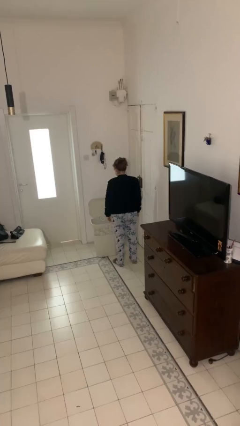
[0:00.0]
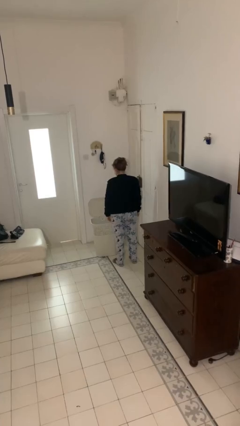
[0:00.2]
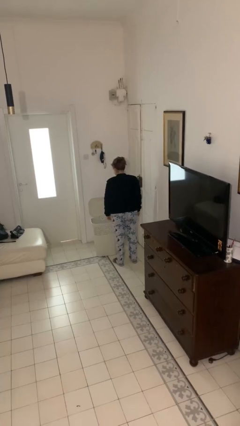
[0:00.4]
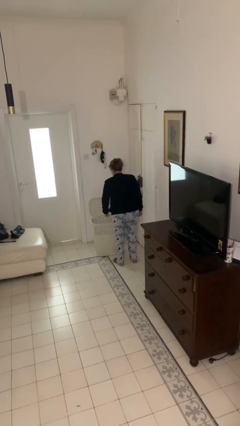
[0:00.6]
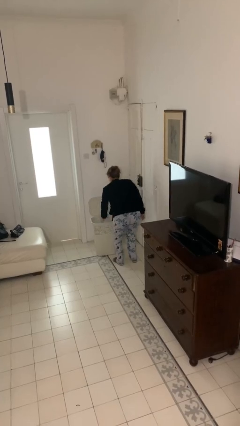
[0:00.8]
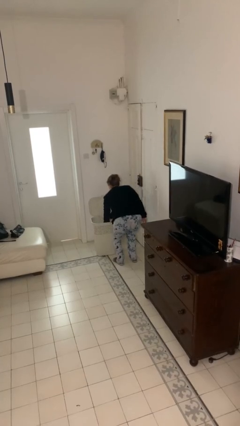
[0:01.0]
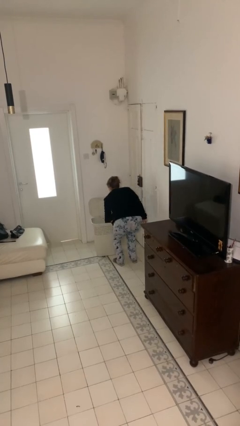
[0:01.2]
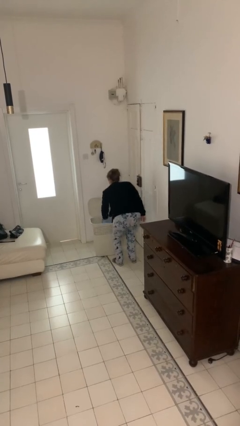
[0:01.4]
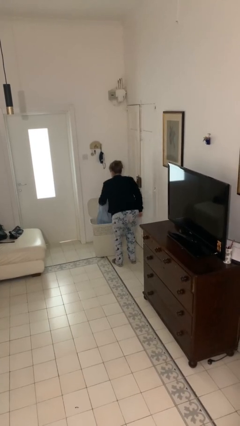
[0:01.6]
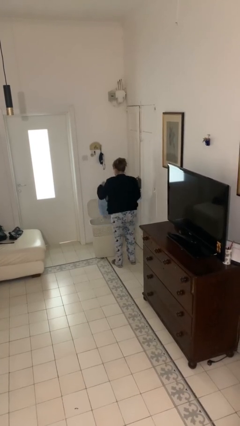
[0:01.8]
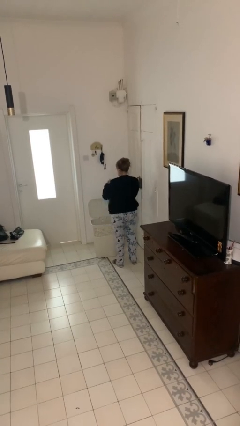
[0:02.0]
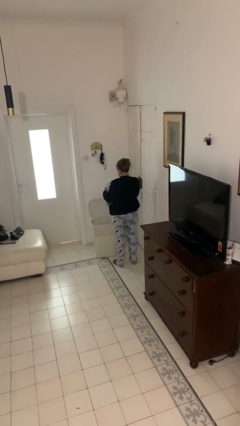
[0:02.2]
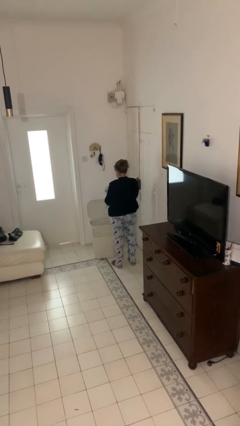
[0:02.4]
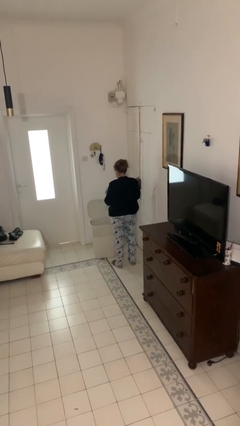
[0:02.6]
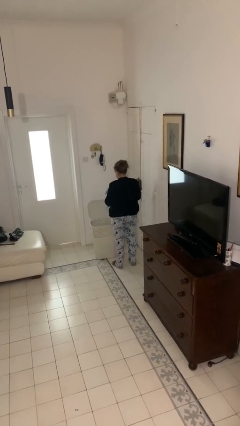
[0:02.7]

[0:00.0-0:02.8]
person takes object from basket

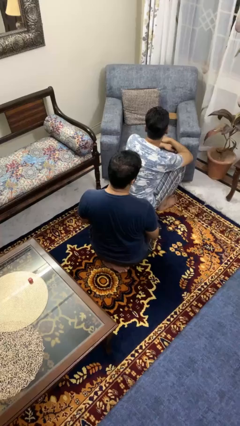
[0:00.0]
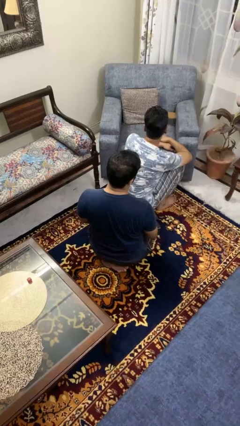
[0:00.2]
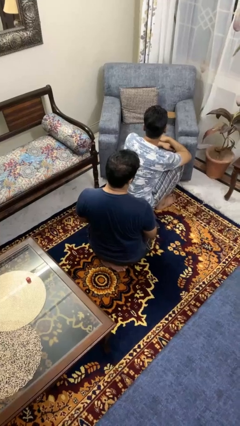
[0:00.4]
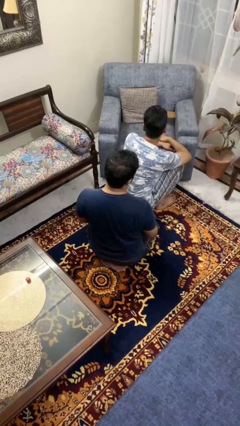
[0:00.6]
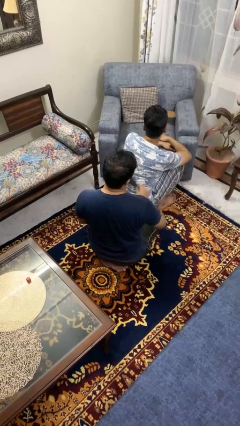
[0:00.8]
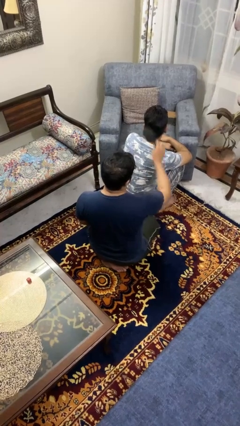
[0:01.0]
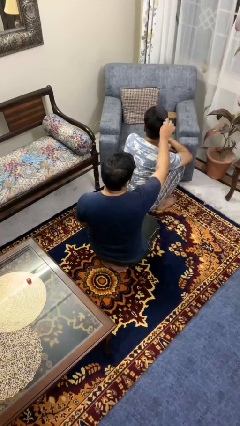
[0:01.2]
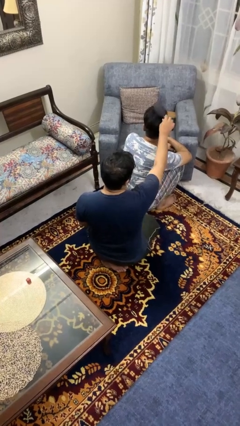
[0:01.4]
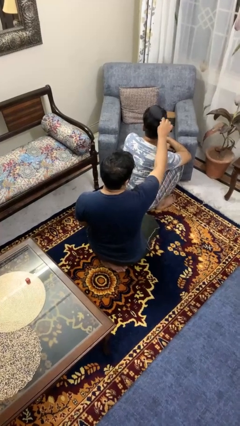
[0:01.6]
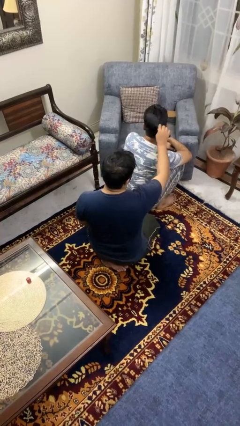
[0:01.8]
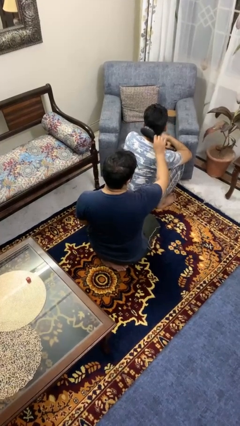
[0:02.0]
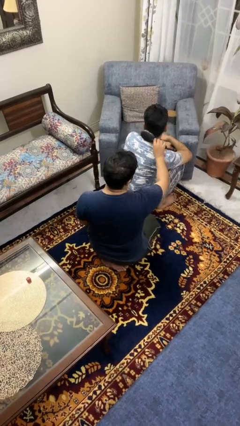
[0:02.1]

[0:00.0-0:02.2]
person brushes hair of person

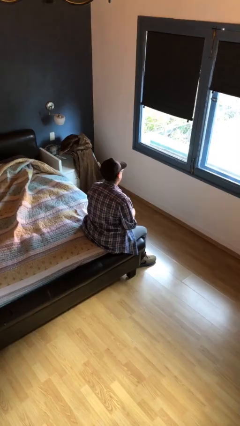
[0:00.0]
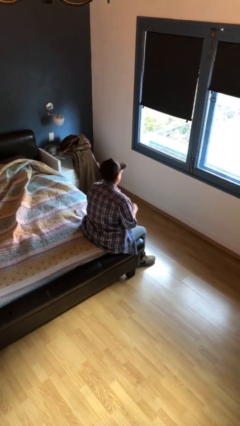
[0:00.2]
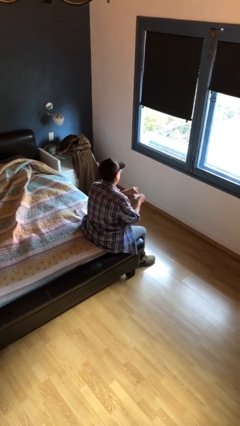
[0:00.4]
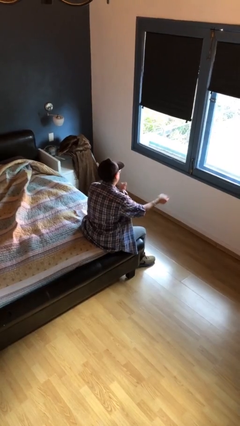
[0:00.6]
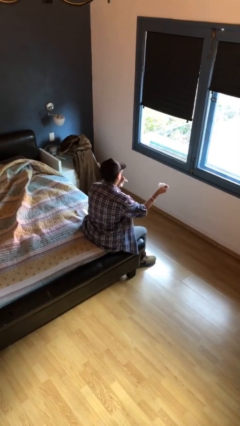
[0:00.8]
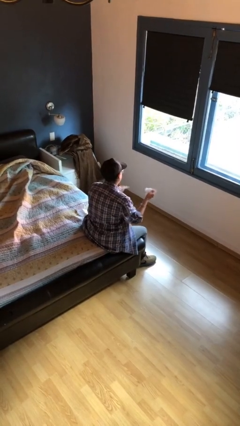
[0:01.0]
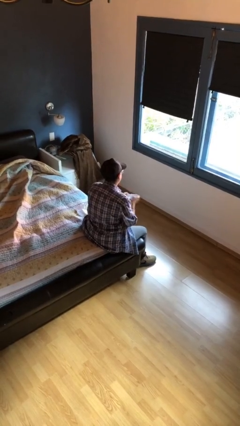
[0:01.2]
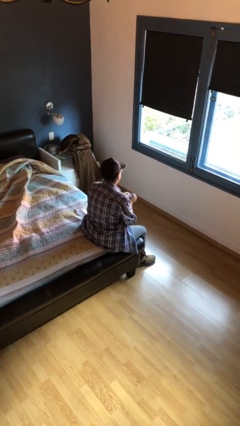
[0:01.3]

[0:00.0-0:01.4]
person tears paper

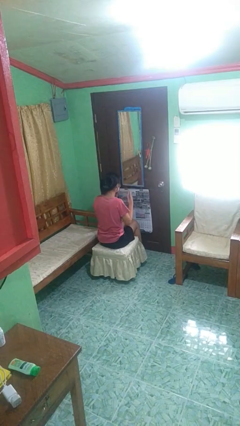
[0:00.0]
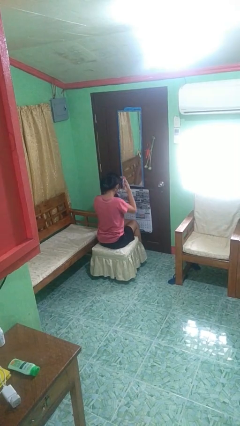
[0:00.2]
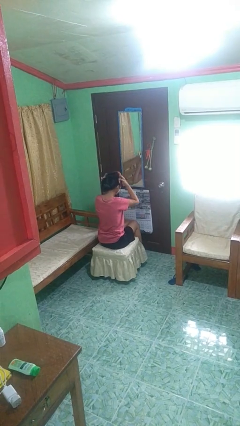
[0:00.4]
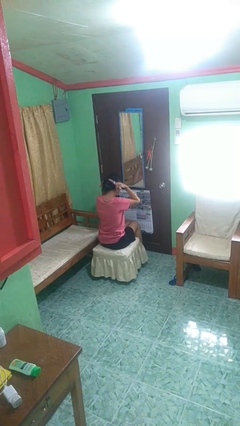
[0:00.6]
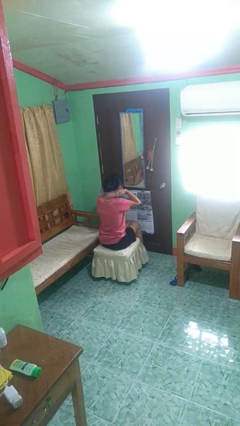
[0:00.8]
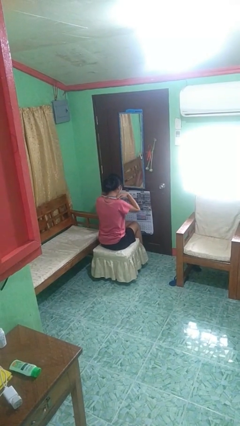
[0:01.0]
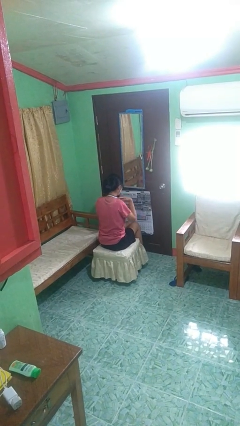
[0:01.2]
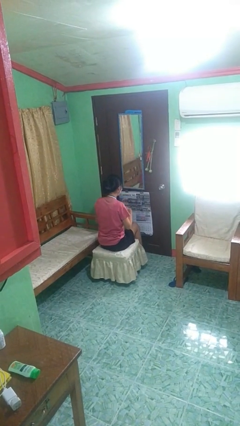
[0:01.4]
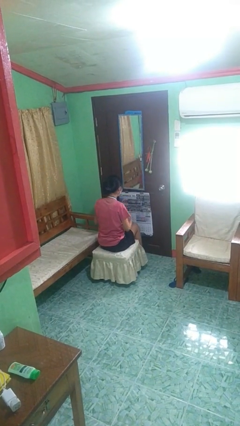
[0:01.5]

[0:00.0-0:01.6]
person puts on necklace

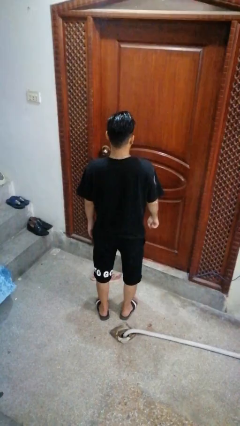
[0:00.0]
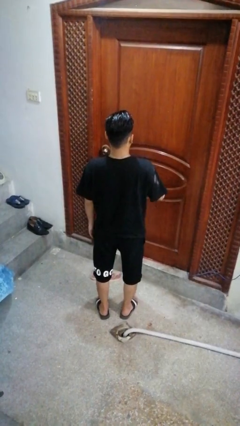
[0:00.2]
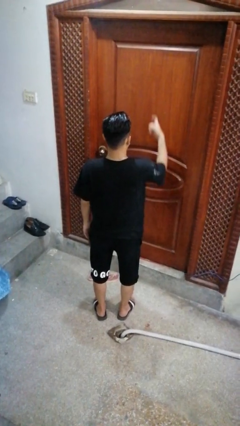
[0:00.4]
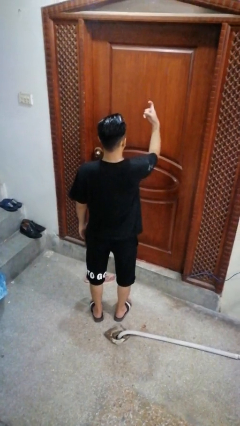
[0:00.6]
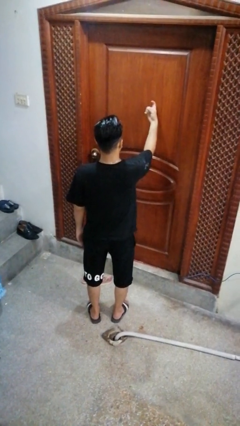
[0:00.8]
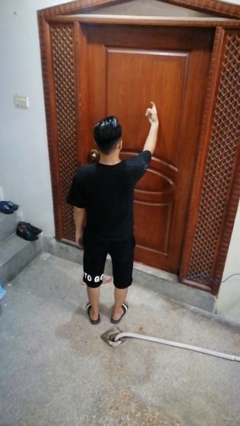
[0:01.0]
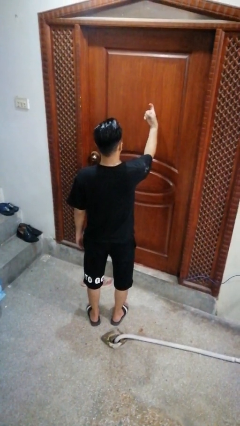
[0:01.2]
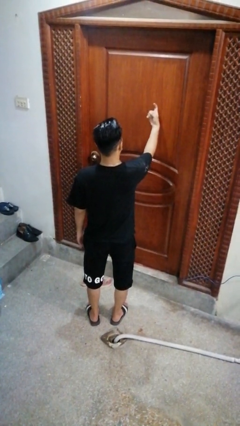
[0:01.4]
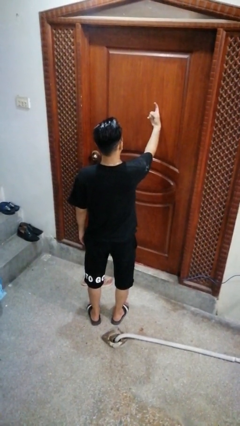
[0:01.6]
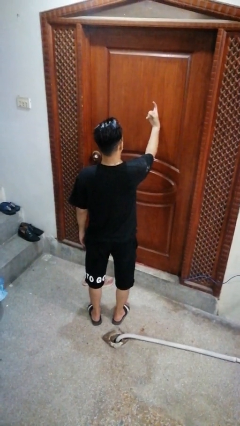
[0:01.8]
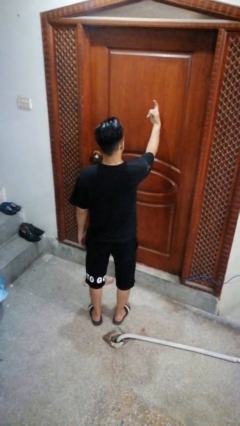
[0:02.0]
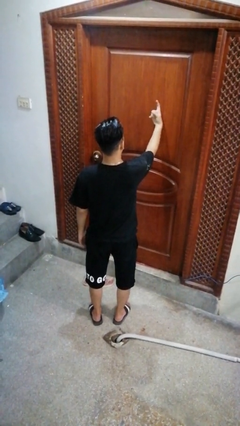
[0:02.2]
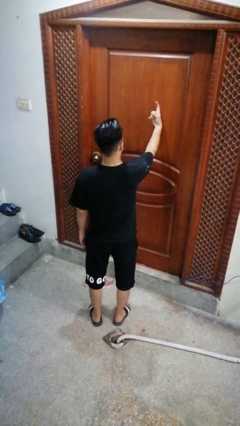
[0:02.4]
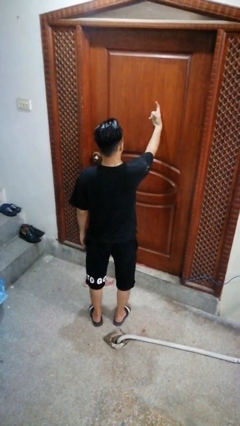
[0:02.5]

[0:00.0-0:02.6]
person taps object with finger

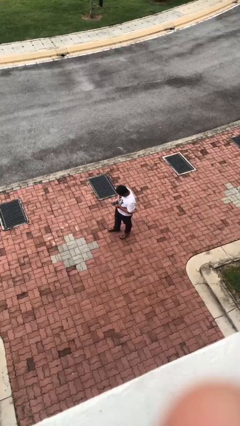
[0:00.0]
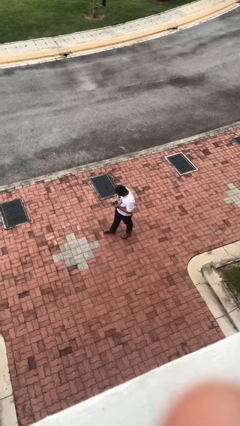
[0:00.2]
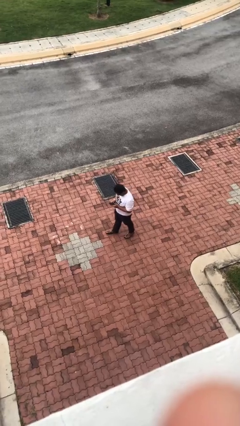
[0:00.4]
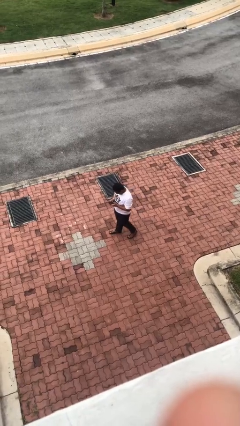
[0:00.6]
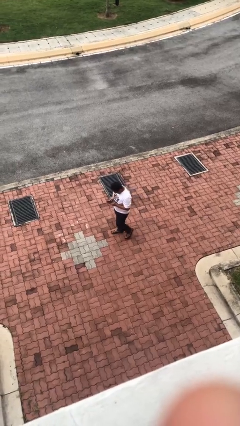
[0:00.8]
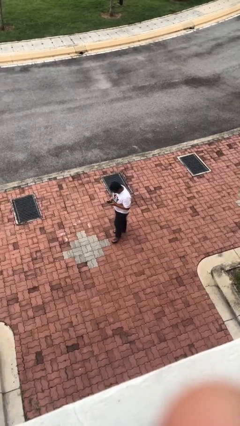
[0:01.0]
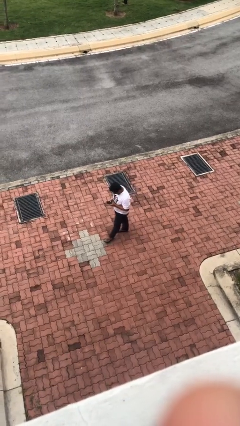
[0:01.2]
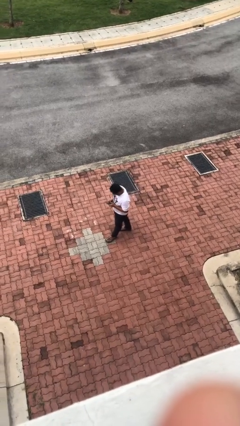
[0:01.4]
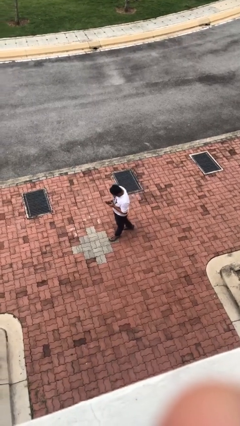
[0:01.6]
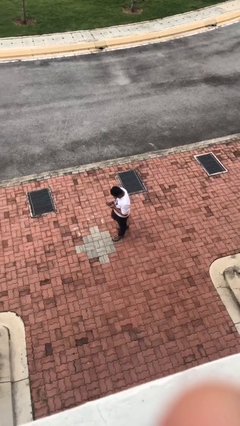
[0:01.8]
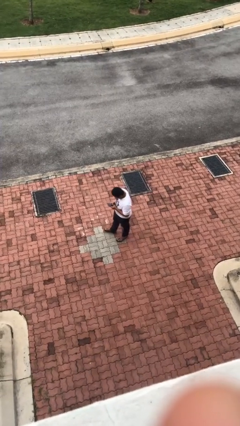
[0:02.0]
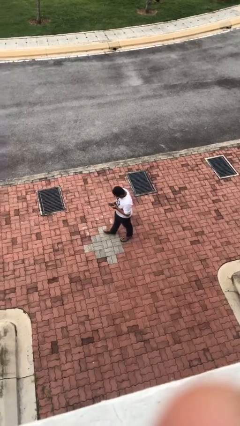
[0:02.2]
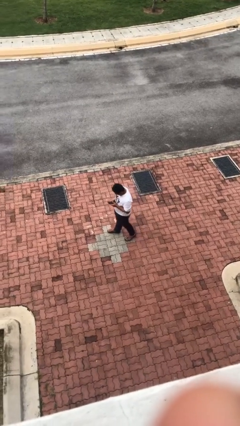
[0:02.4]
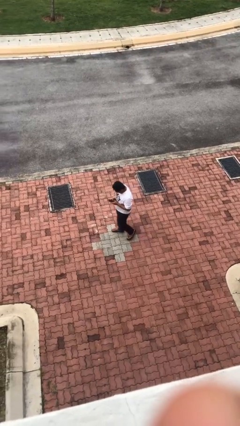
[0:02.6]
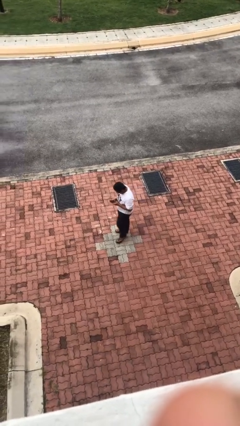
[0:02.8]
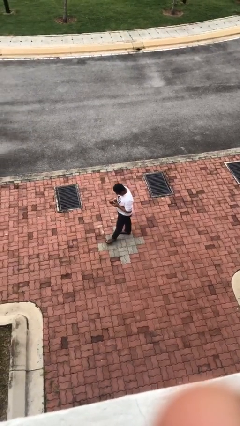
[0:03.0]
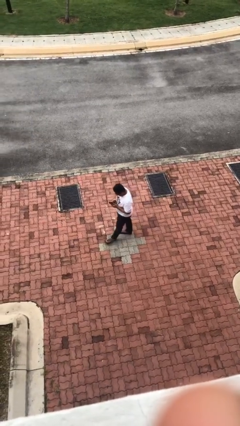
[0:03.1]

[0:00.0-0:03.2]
person texts on phone

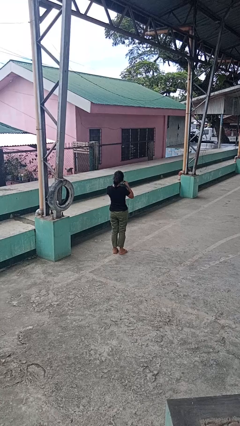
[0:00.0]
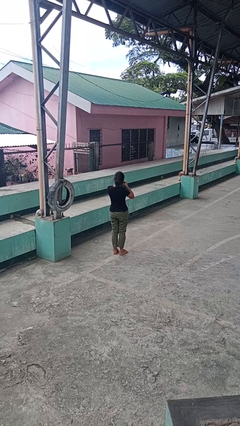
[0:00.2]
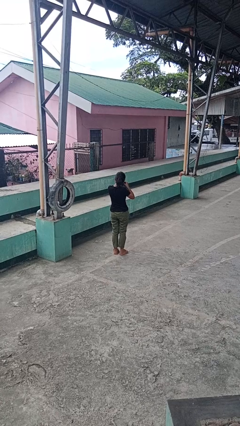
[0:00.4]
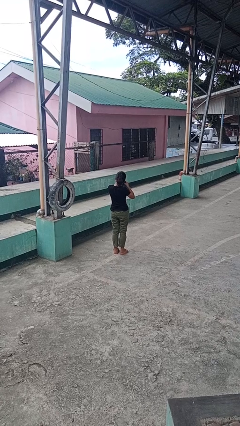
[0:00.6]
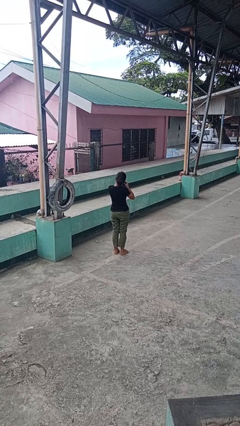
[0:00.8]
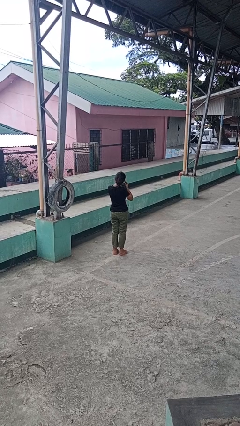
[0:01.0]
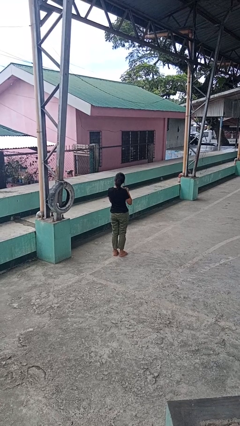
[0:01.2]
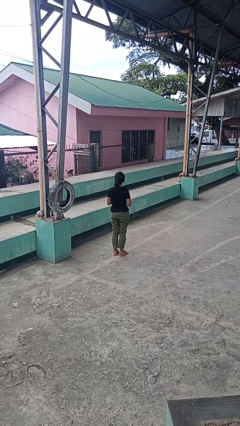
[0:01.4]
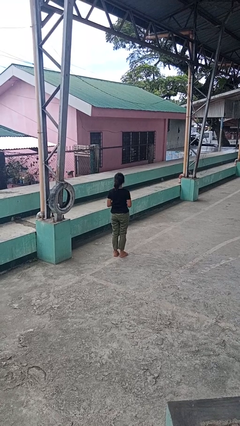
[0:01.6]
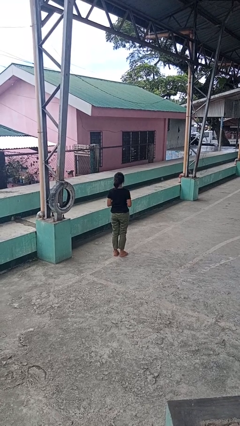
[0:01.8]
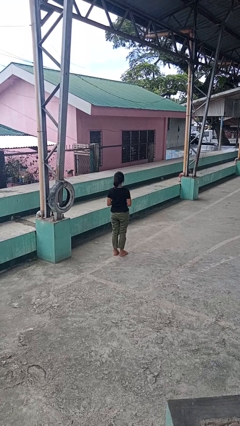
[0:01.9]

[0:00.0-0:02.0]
person takes off earrings

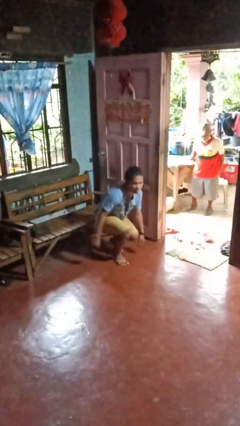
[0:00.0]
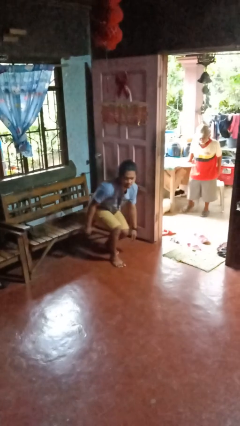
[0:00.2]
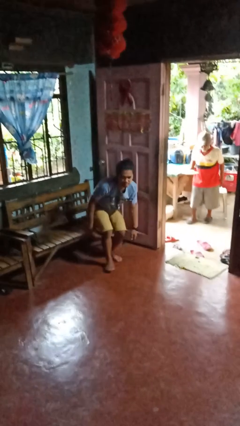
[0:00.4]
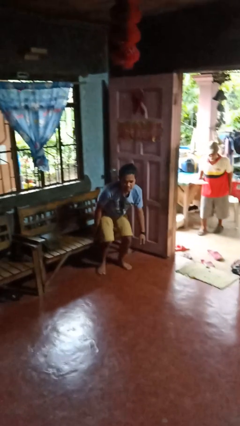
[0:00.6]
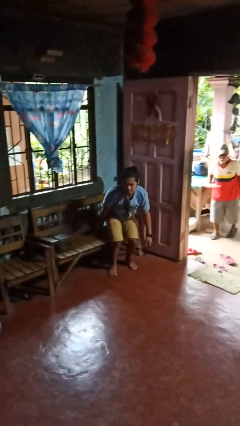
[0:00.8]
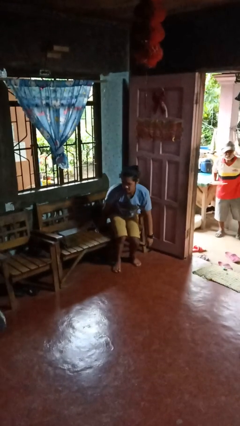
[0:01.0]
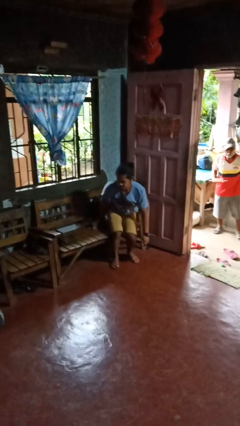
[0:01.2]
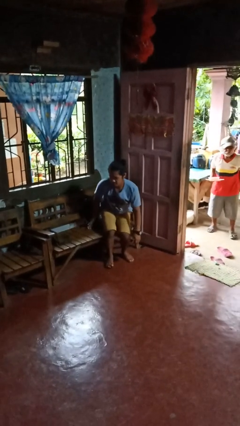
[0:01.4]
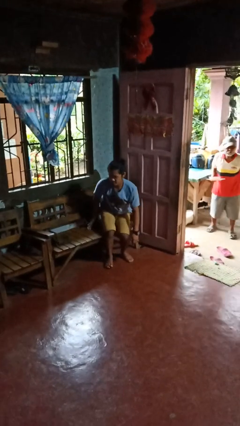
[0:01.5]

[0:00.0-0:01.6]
person stands up from floor
